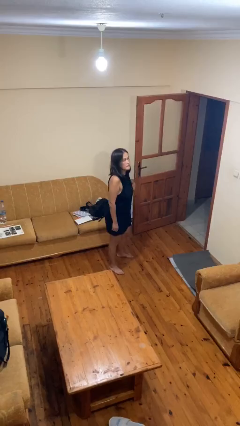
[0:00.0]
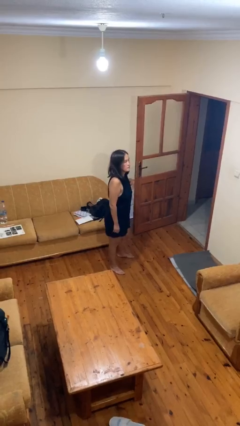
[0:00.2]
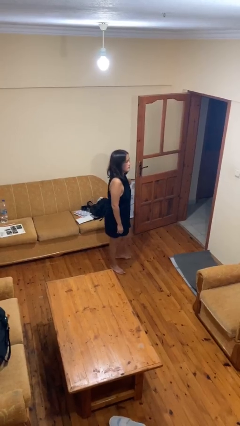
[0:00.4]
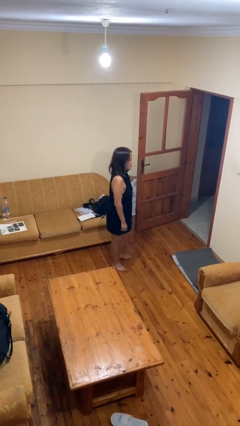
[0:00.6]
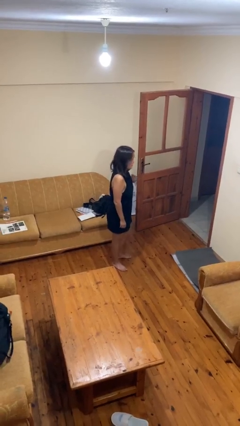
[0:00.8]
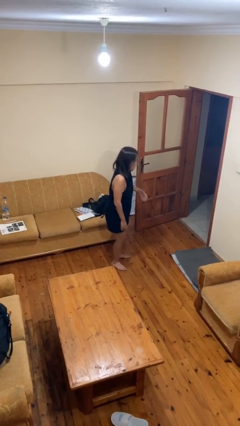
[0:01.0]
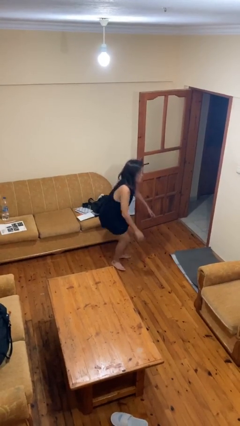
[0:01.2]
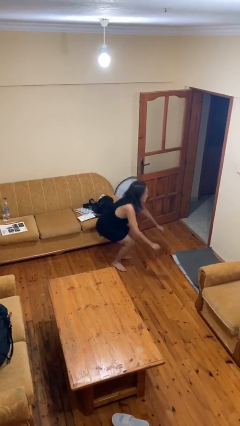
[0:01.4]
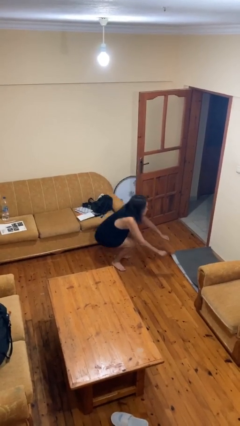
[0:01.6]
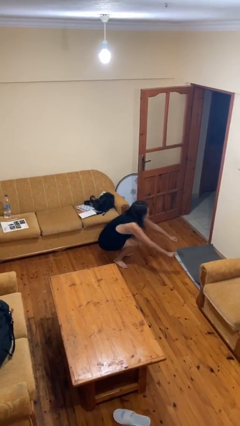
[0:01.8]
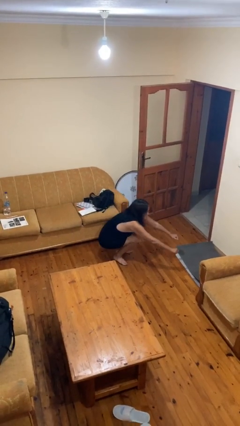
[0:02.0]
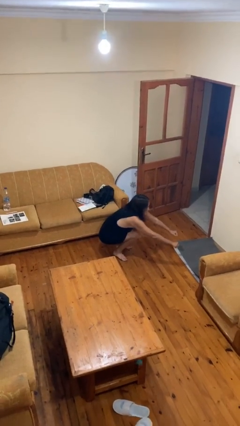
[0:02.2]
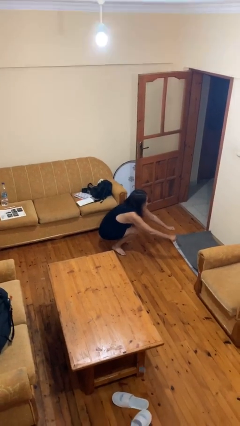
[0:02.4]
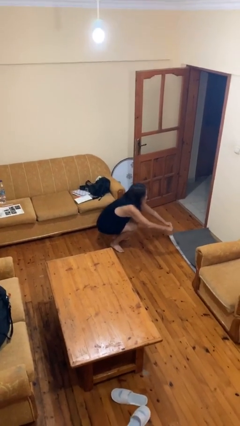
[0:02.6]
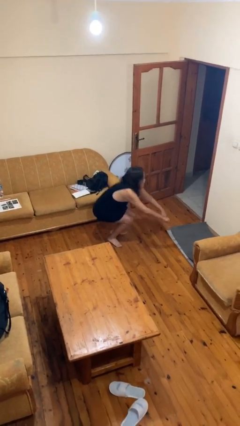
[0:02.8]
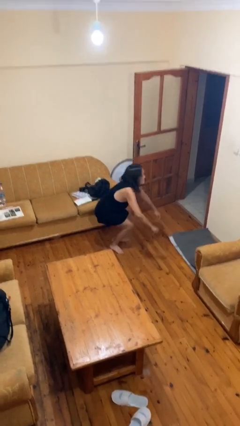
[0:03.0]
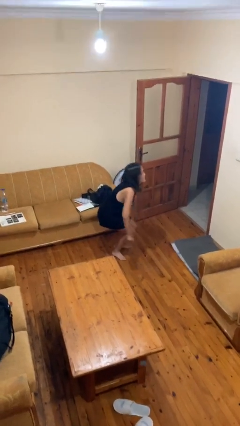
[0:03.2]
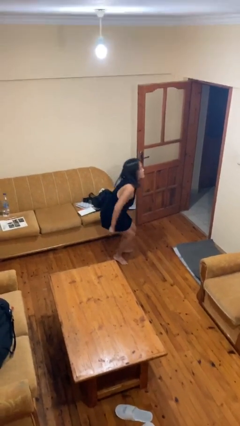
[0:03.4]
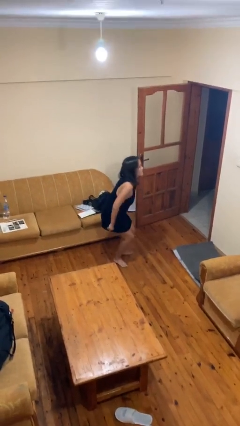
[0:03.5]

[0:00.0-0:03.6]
person squats

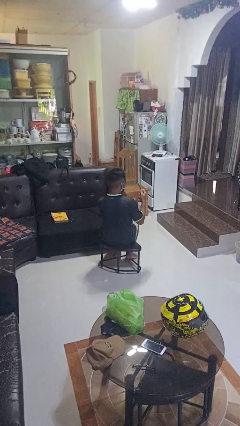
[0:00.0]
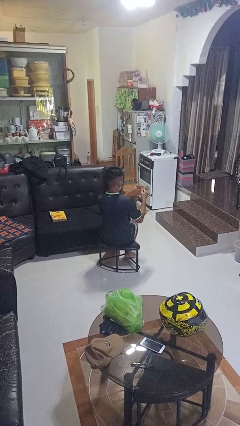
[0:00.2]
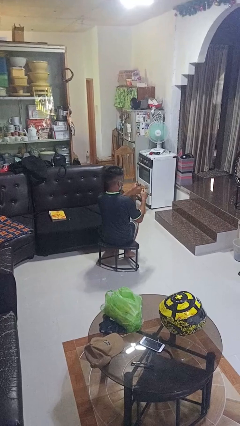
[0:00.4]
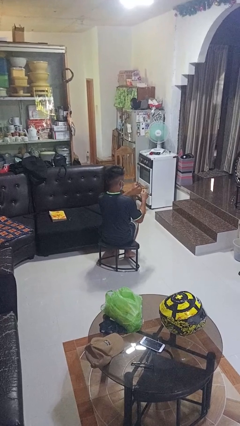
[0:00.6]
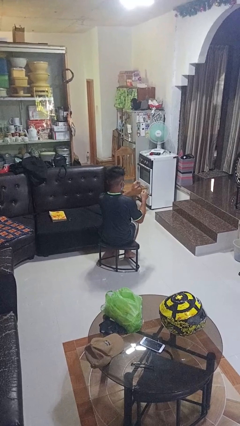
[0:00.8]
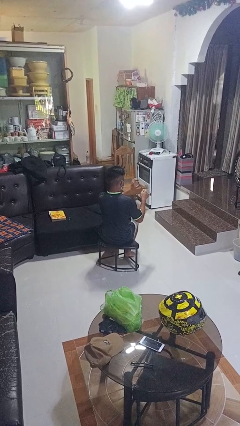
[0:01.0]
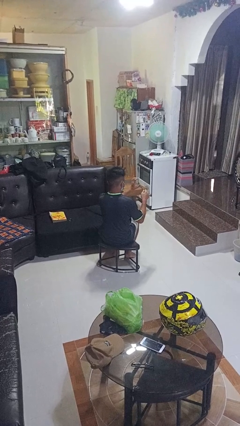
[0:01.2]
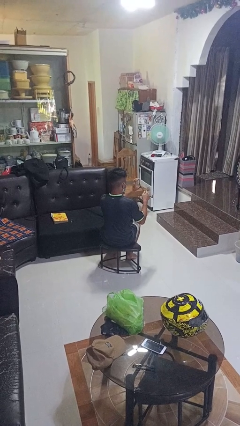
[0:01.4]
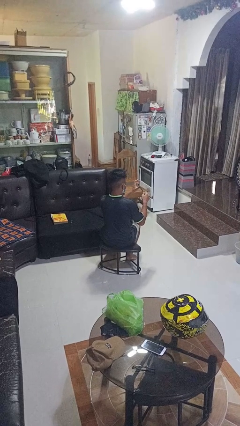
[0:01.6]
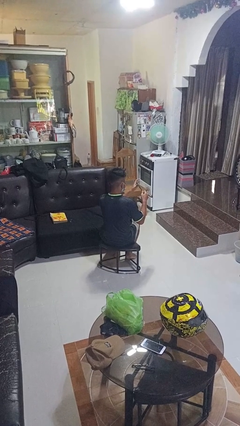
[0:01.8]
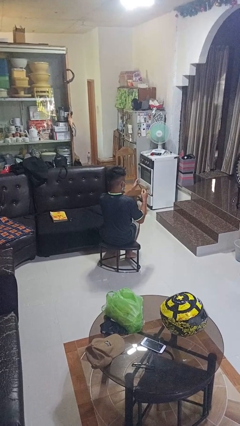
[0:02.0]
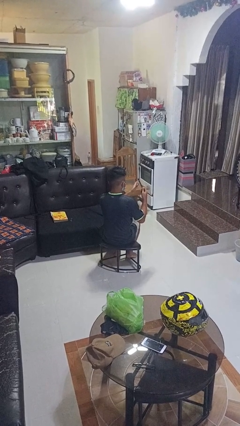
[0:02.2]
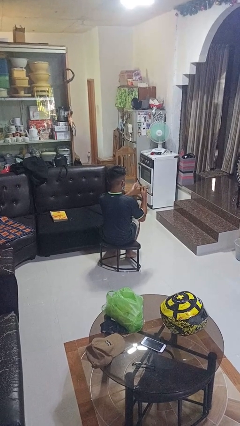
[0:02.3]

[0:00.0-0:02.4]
person files fingernails

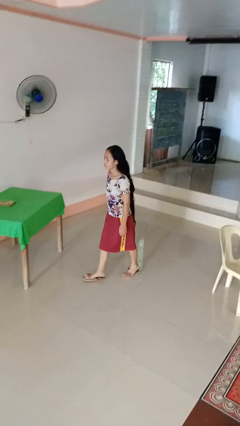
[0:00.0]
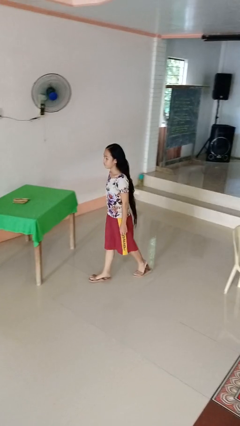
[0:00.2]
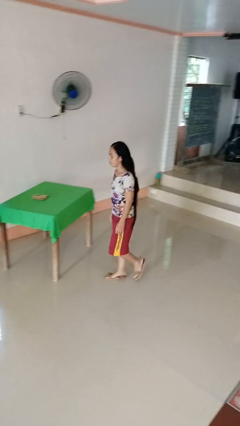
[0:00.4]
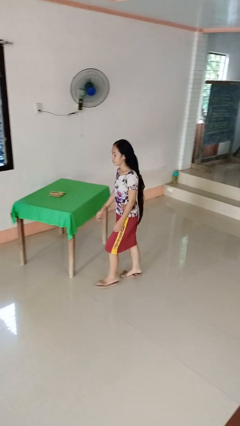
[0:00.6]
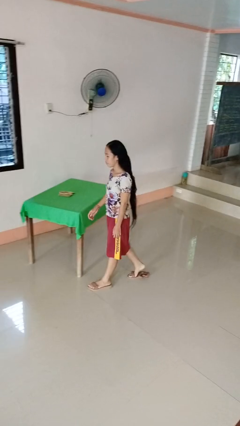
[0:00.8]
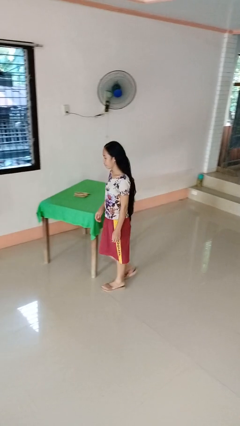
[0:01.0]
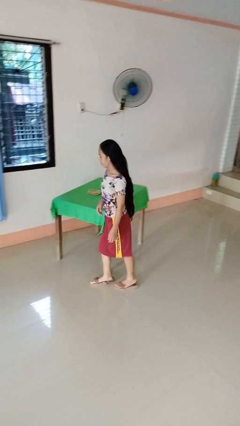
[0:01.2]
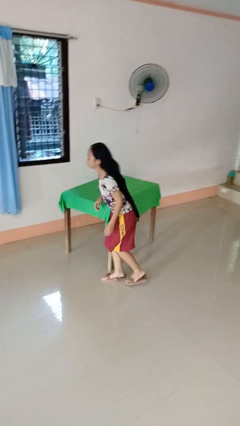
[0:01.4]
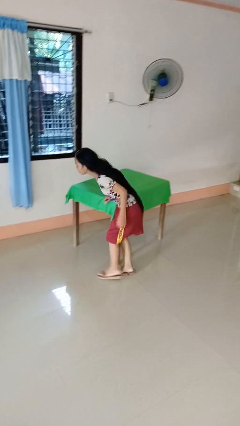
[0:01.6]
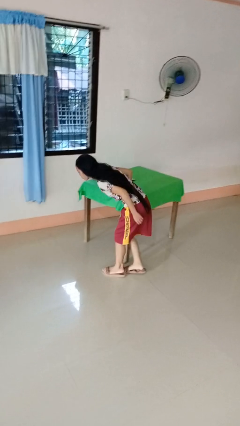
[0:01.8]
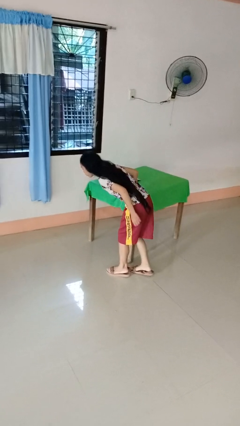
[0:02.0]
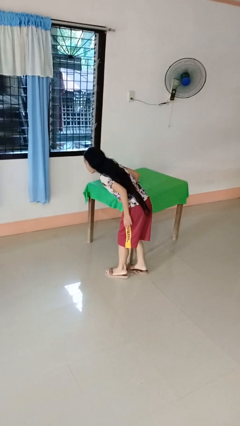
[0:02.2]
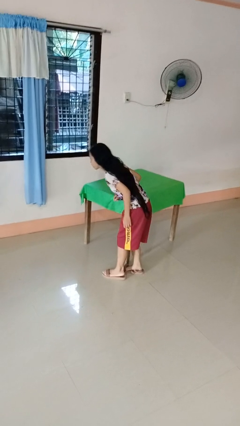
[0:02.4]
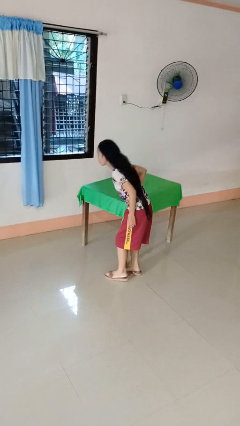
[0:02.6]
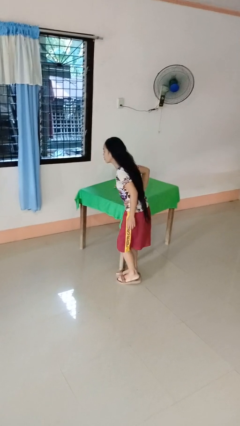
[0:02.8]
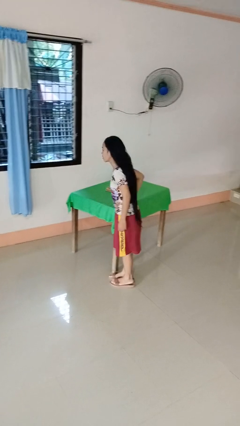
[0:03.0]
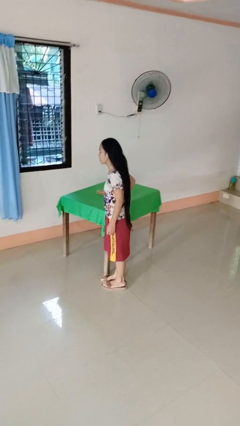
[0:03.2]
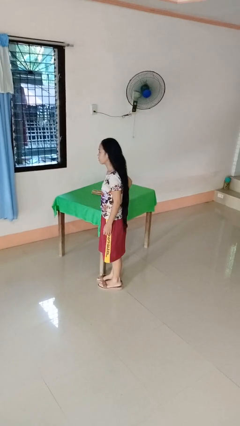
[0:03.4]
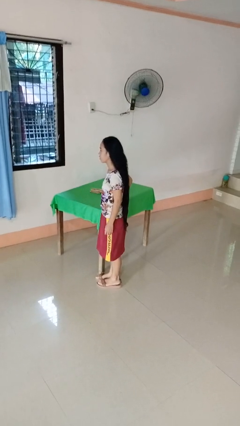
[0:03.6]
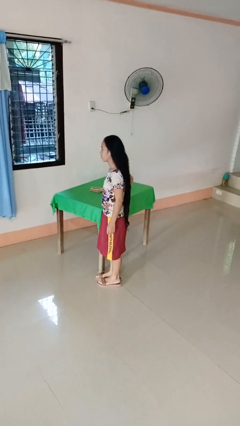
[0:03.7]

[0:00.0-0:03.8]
person bumps into table

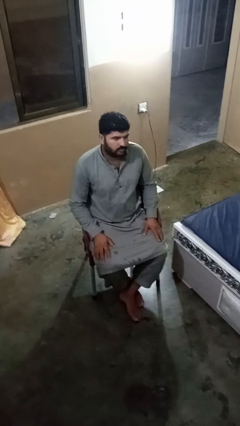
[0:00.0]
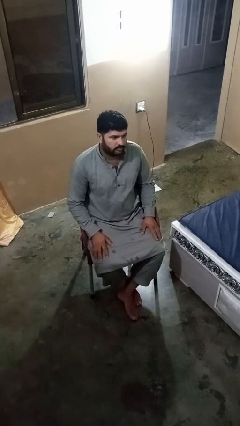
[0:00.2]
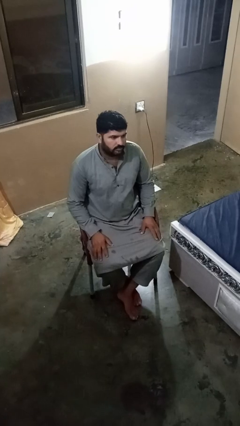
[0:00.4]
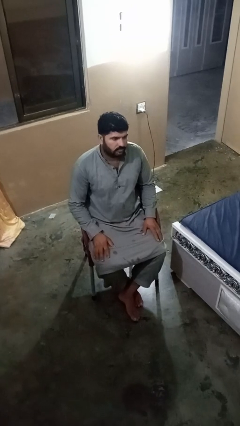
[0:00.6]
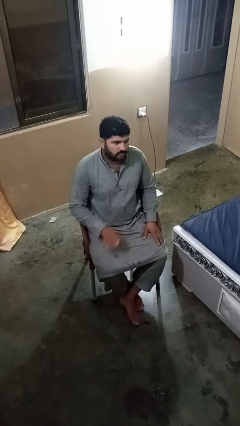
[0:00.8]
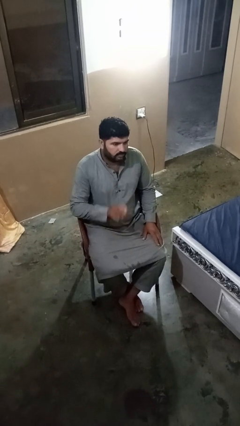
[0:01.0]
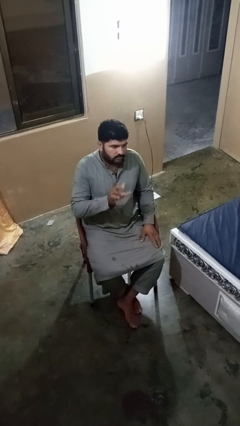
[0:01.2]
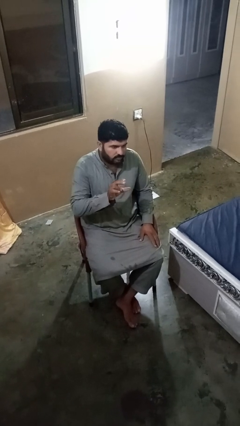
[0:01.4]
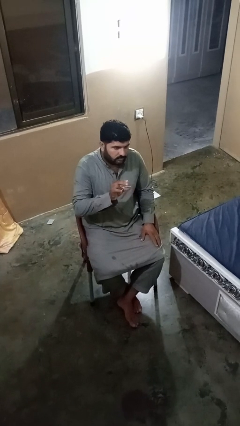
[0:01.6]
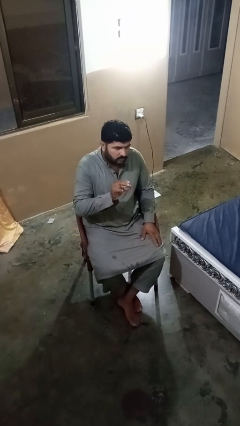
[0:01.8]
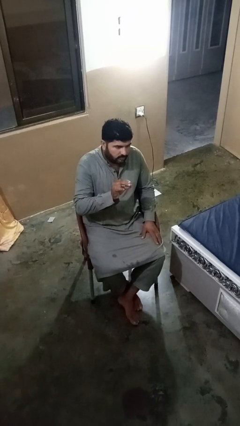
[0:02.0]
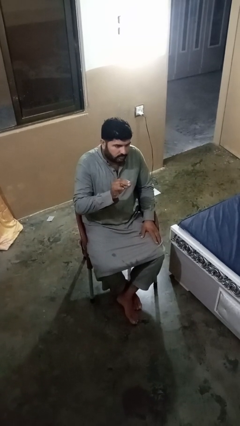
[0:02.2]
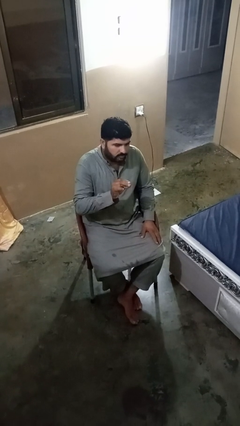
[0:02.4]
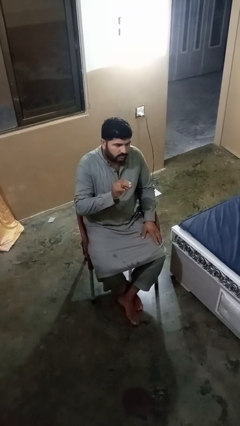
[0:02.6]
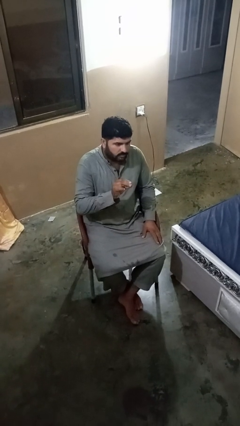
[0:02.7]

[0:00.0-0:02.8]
person gestures zoom in

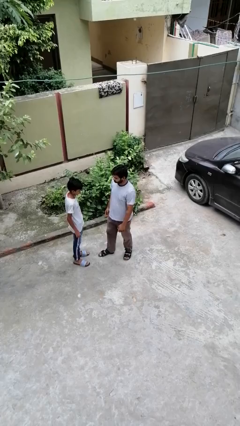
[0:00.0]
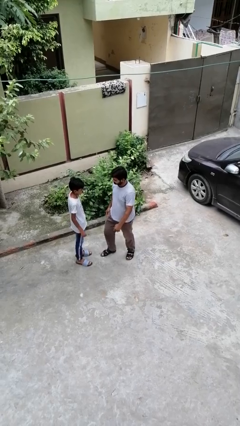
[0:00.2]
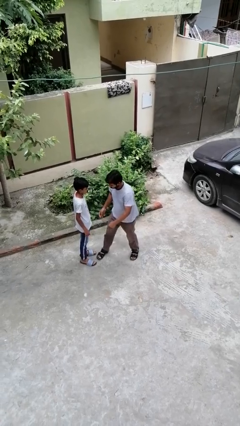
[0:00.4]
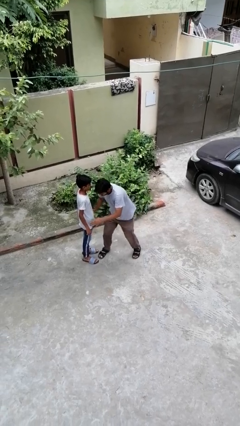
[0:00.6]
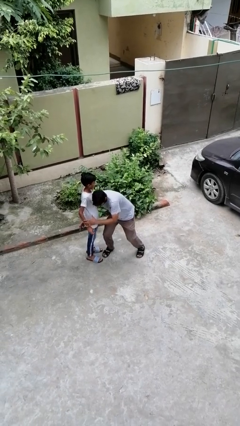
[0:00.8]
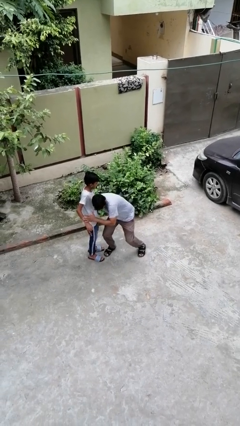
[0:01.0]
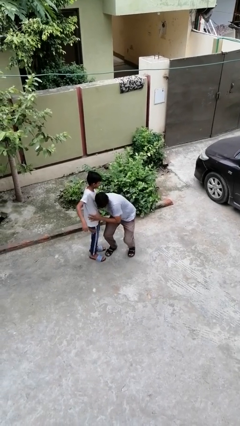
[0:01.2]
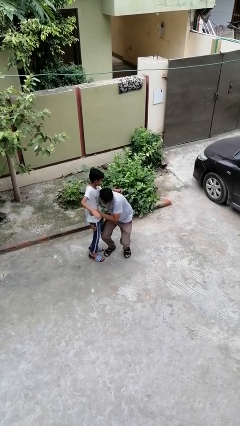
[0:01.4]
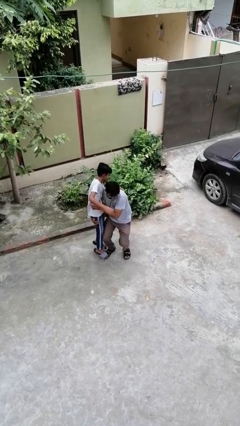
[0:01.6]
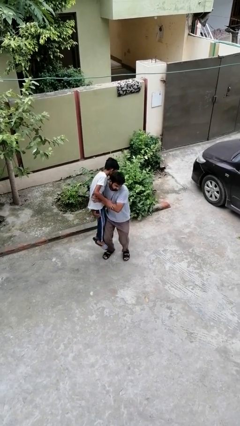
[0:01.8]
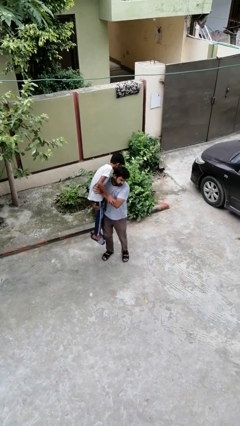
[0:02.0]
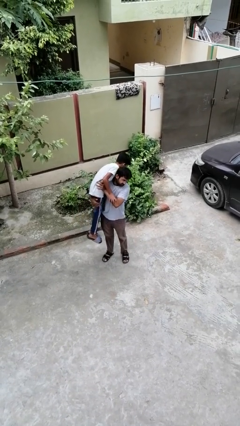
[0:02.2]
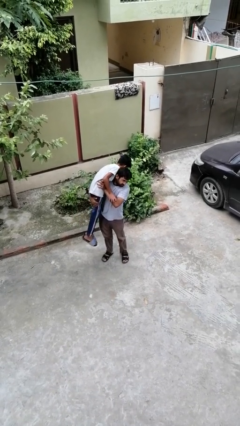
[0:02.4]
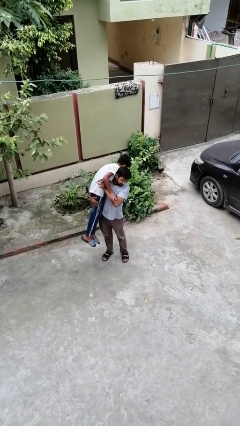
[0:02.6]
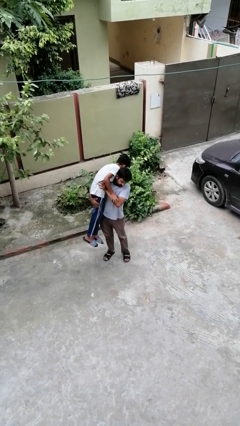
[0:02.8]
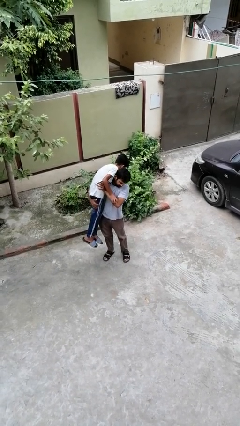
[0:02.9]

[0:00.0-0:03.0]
person picks up person

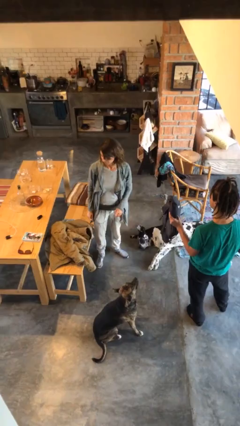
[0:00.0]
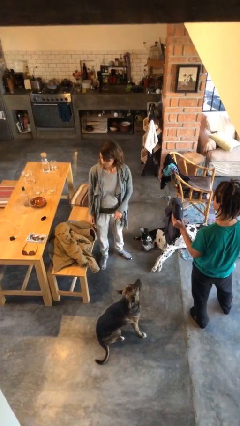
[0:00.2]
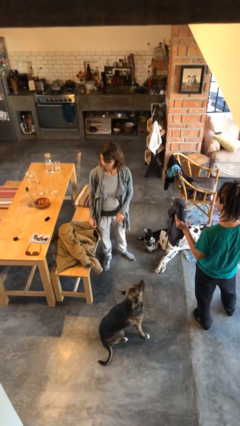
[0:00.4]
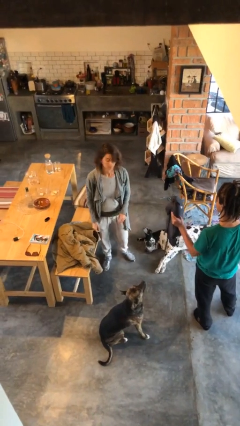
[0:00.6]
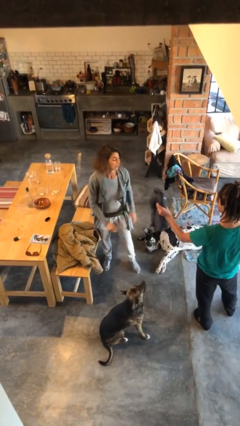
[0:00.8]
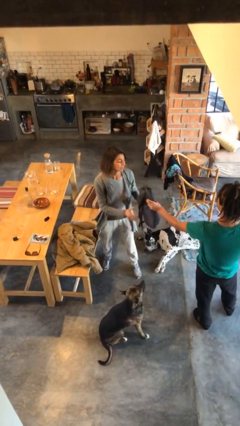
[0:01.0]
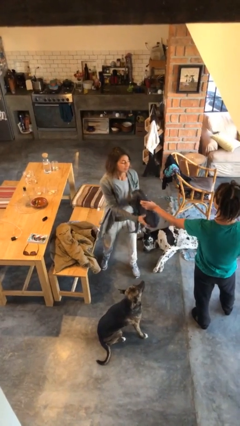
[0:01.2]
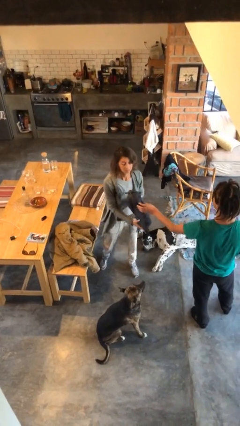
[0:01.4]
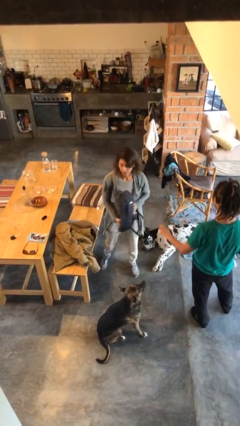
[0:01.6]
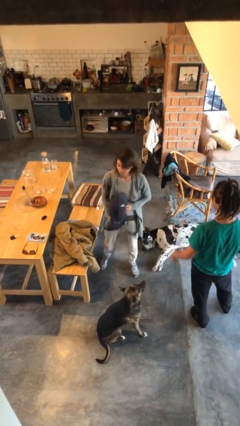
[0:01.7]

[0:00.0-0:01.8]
person transfers object to person
